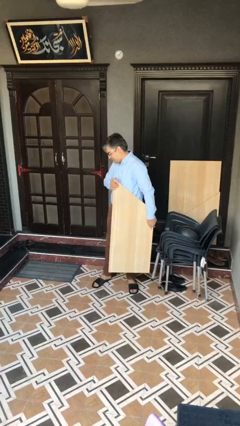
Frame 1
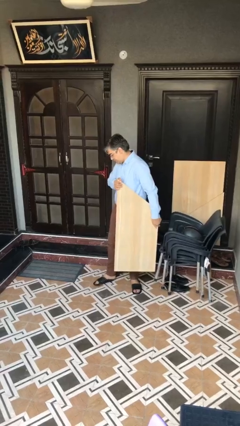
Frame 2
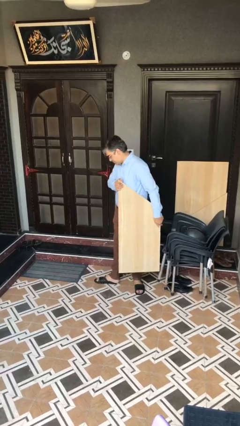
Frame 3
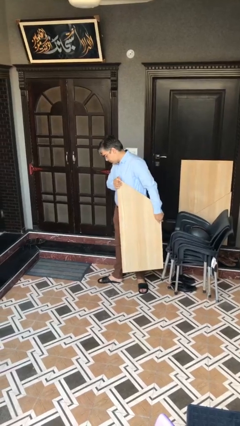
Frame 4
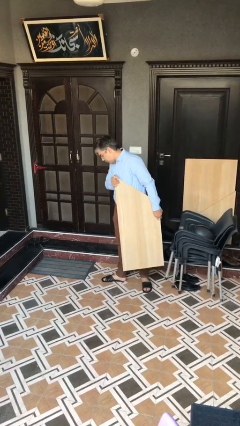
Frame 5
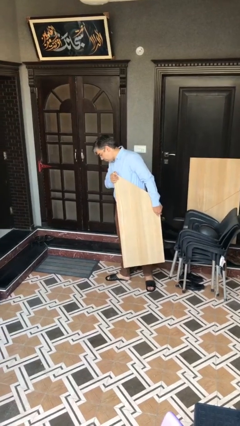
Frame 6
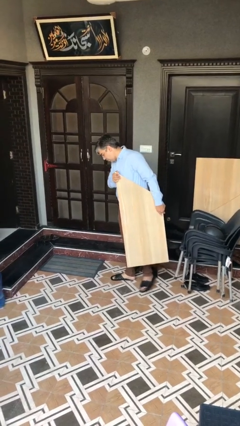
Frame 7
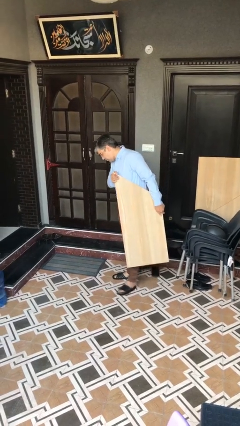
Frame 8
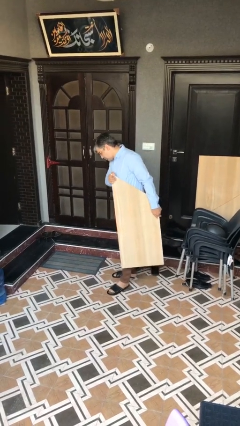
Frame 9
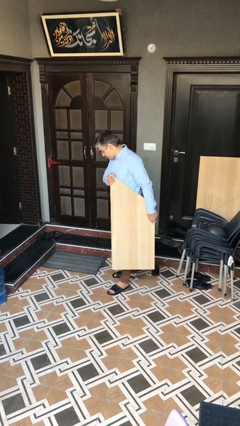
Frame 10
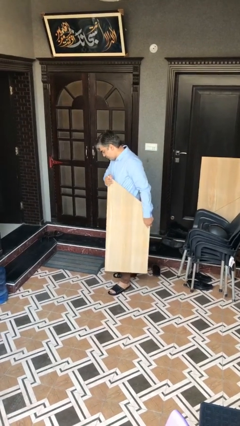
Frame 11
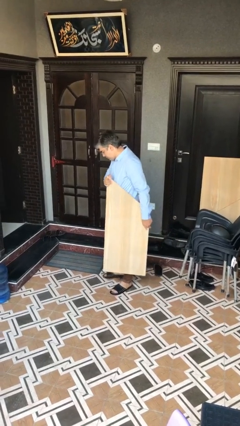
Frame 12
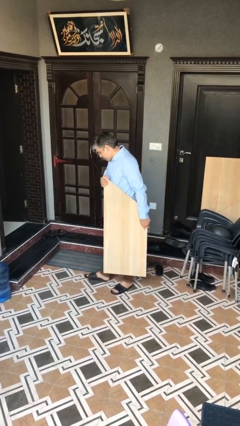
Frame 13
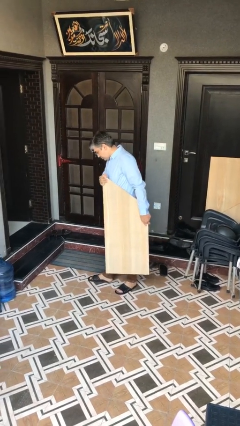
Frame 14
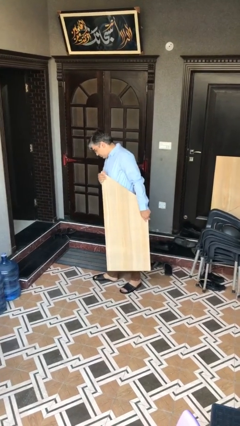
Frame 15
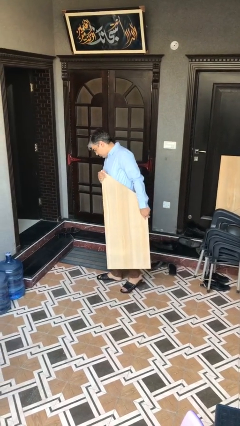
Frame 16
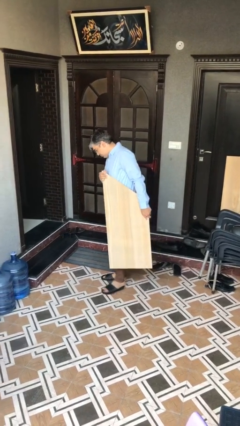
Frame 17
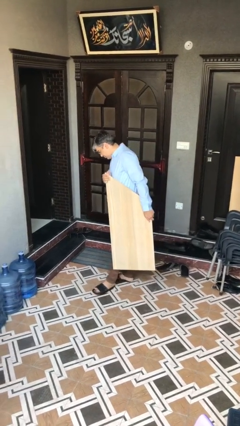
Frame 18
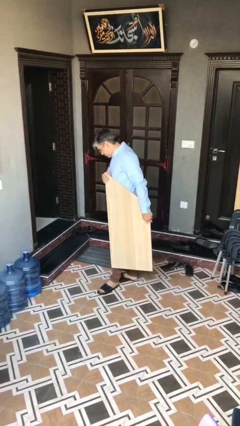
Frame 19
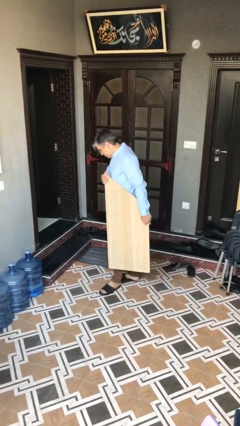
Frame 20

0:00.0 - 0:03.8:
person carries heavy object

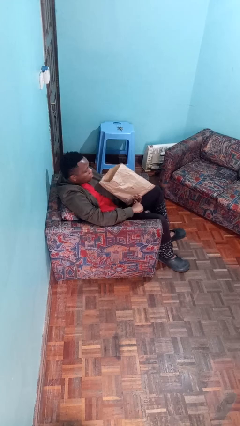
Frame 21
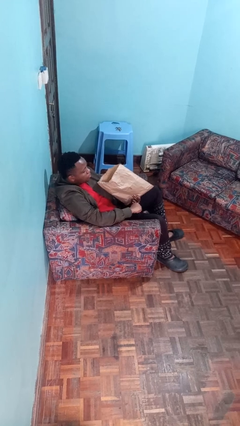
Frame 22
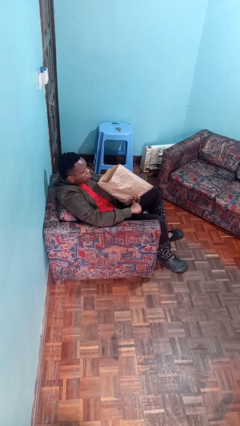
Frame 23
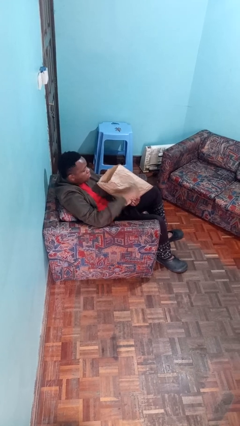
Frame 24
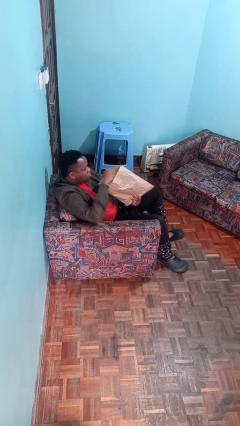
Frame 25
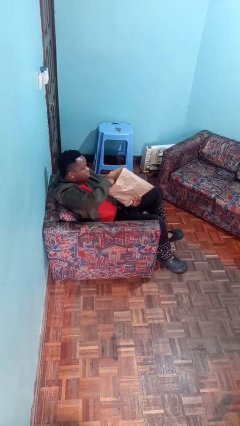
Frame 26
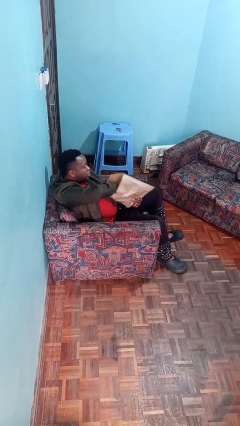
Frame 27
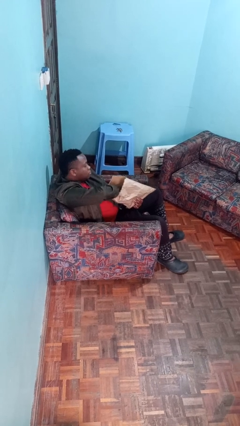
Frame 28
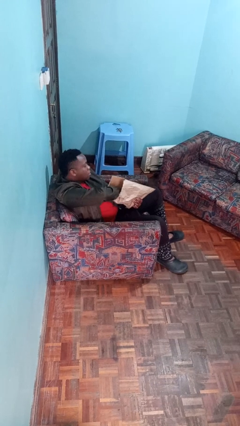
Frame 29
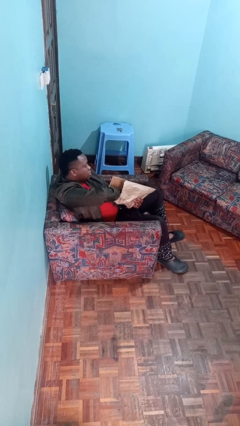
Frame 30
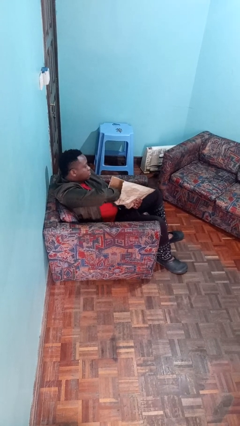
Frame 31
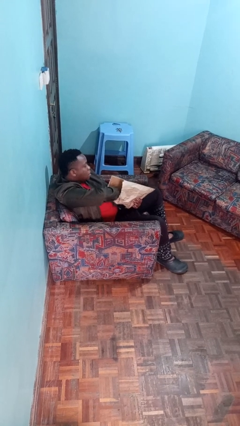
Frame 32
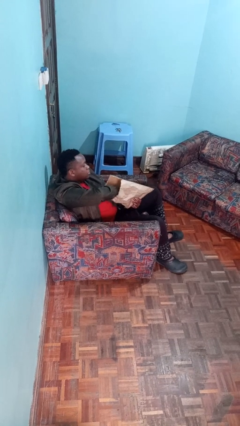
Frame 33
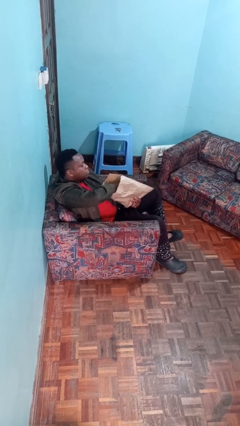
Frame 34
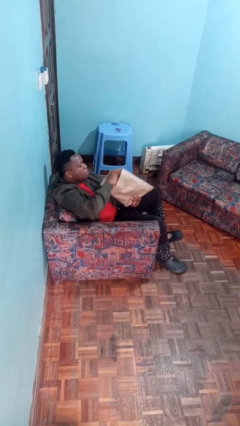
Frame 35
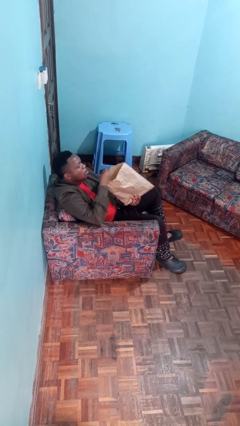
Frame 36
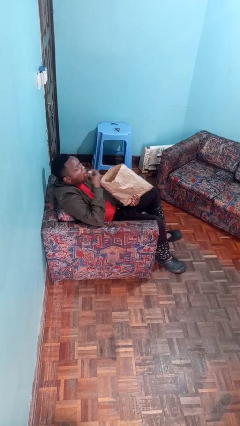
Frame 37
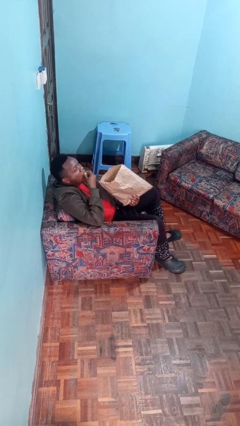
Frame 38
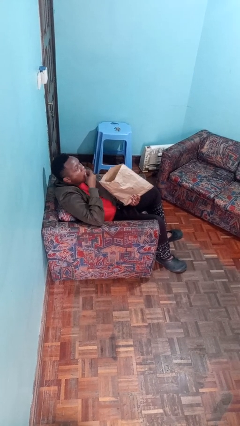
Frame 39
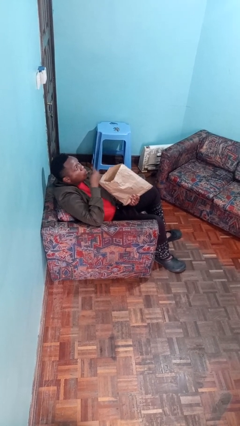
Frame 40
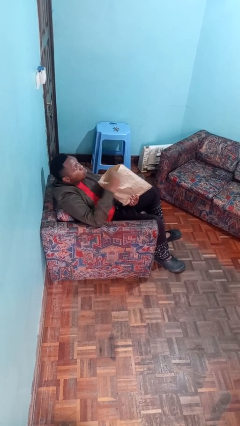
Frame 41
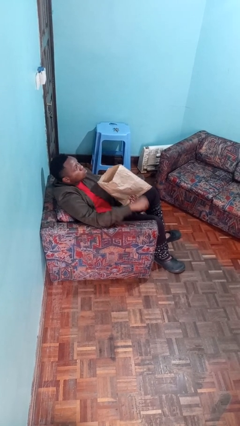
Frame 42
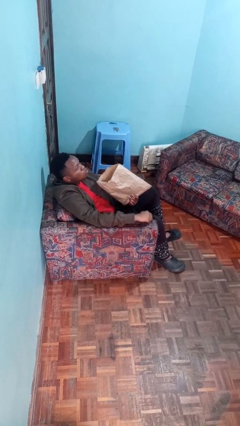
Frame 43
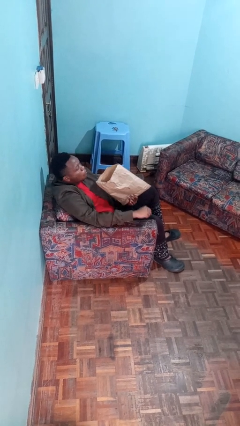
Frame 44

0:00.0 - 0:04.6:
person eats snack from bag

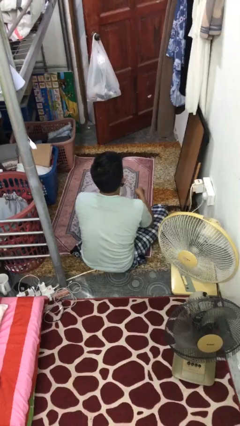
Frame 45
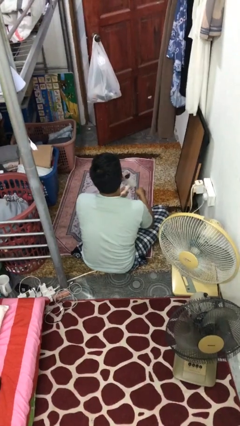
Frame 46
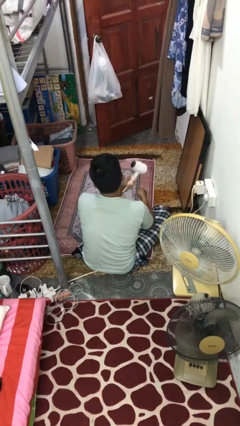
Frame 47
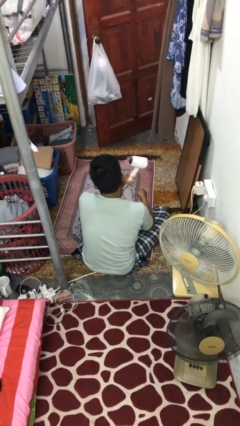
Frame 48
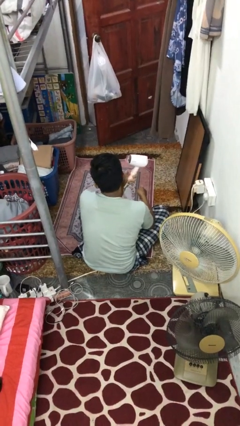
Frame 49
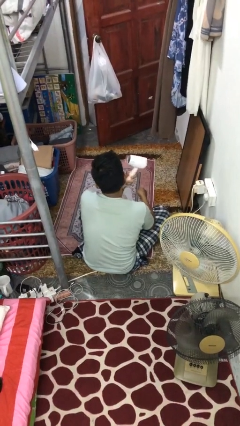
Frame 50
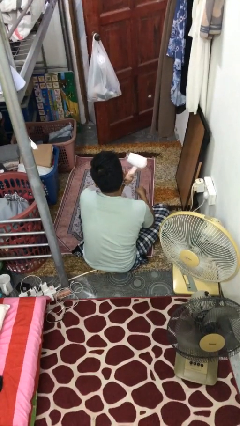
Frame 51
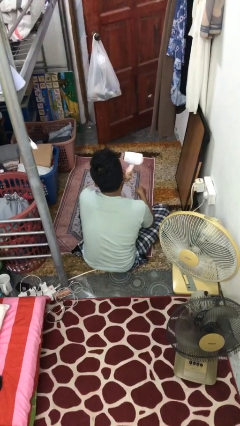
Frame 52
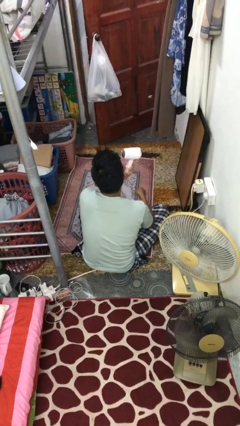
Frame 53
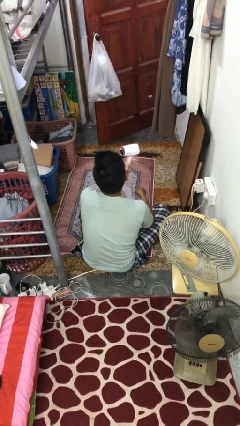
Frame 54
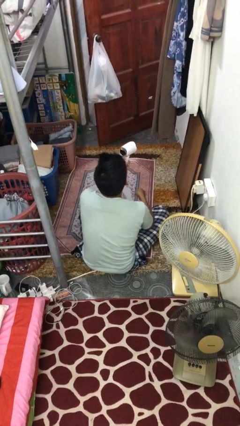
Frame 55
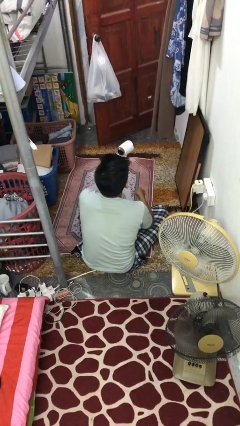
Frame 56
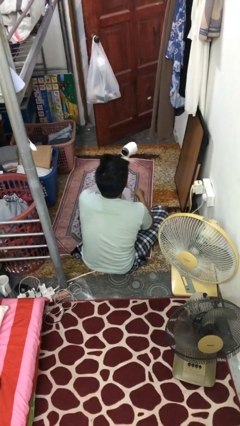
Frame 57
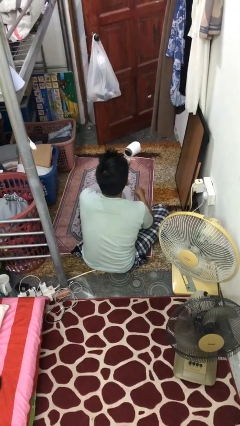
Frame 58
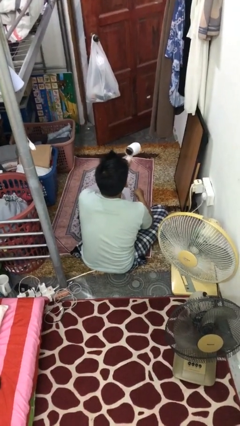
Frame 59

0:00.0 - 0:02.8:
person dries hair with hairdryer

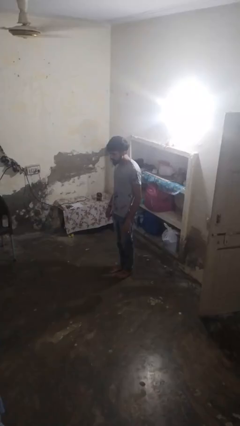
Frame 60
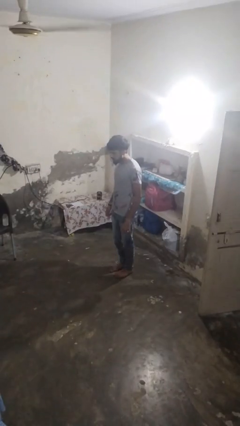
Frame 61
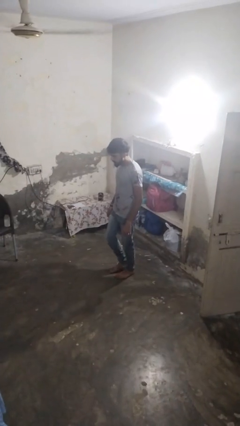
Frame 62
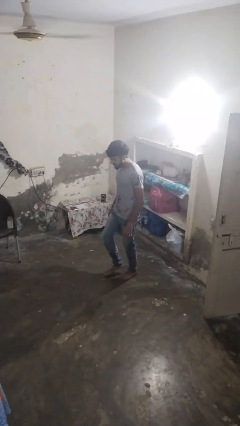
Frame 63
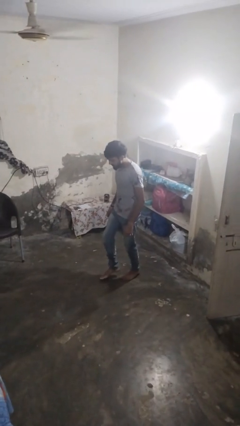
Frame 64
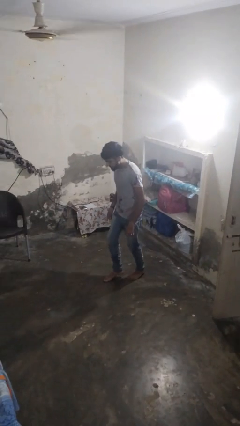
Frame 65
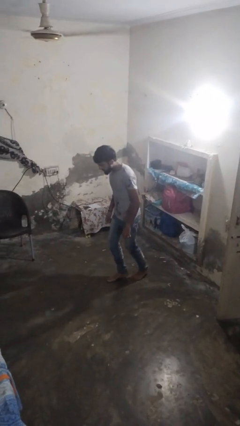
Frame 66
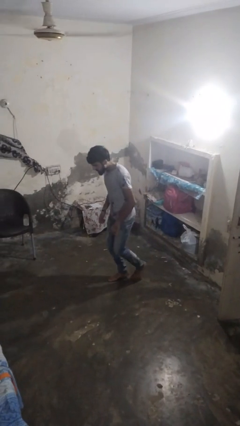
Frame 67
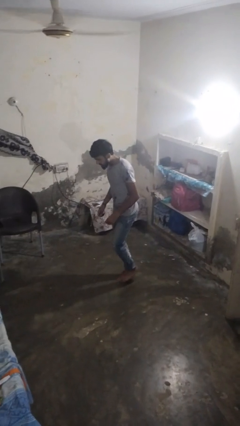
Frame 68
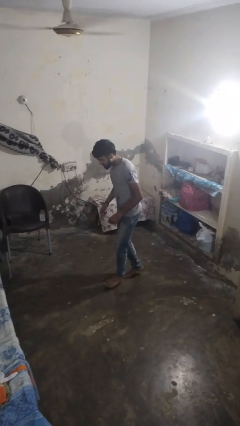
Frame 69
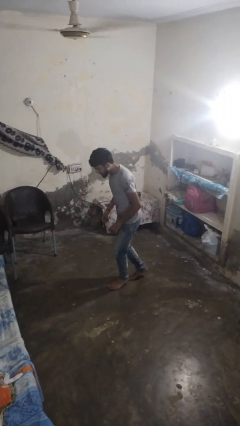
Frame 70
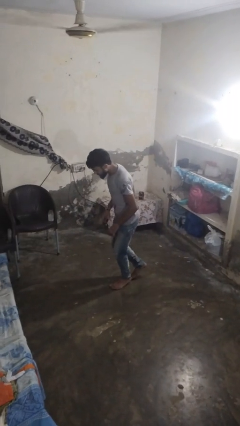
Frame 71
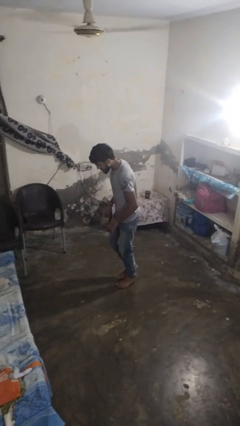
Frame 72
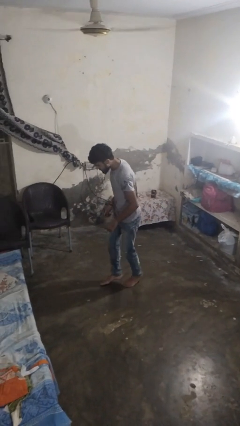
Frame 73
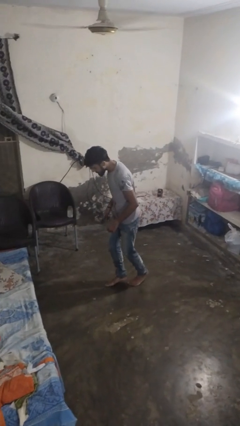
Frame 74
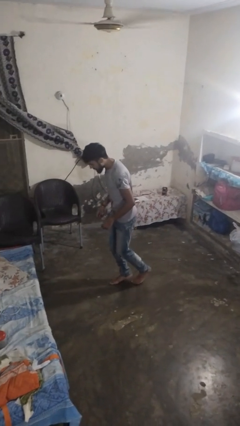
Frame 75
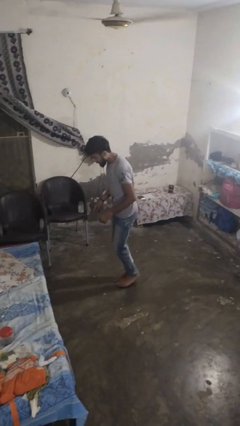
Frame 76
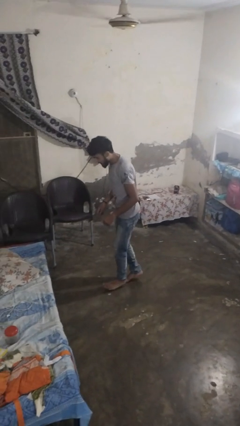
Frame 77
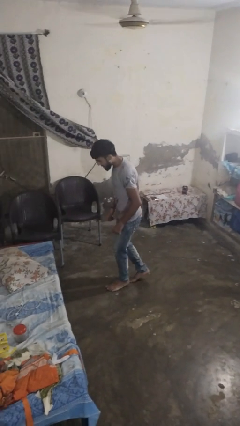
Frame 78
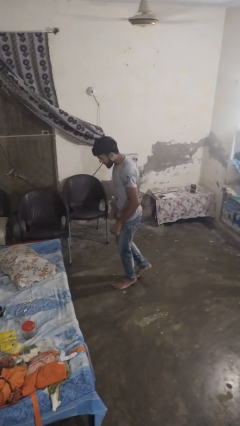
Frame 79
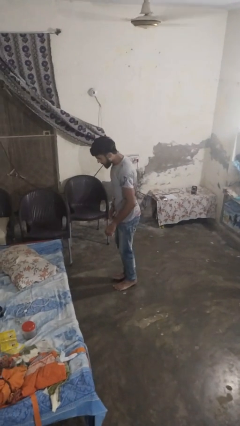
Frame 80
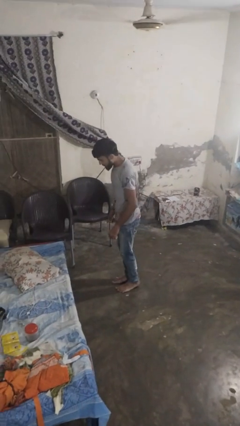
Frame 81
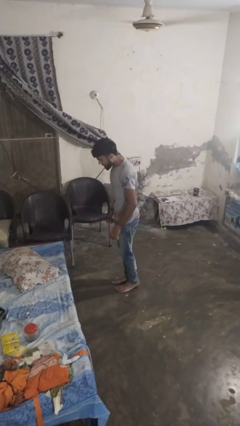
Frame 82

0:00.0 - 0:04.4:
person walks tiptoe

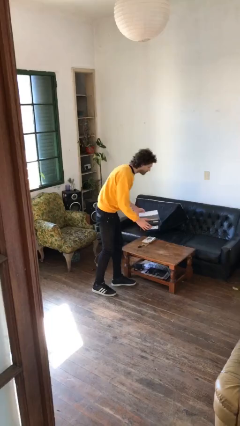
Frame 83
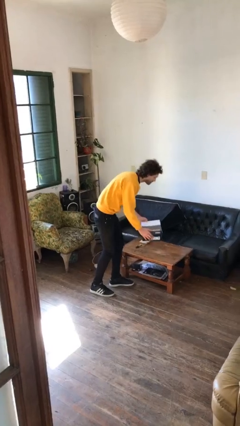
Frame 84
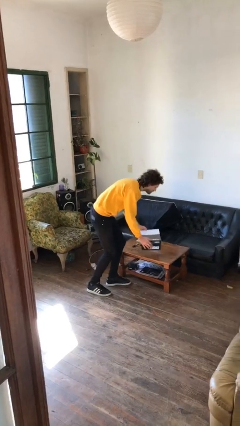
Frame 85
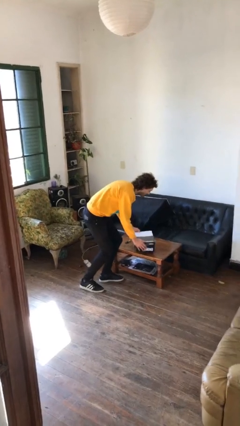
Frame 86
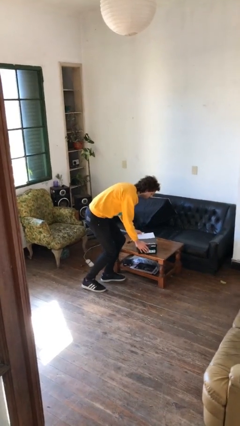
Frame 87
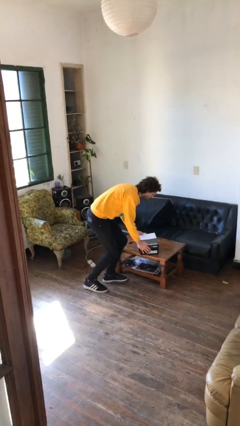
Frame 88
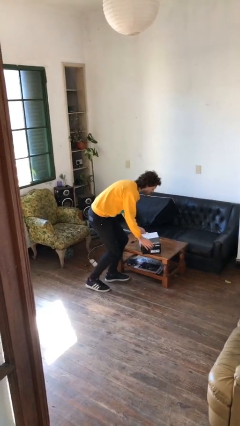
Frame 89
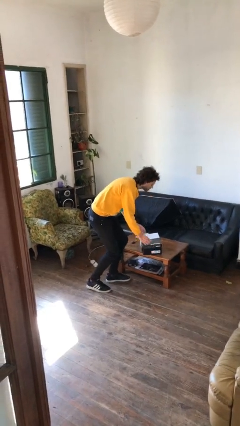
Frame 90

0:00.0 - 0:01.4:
person puts down object on table

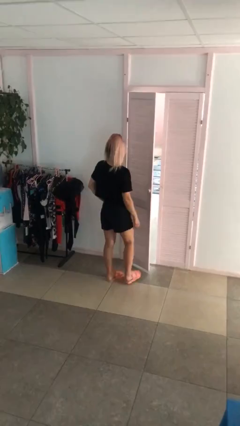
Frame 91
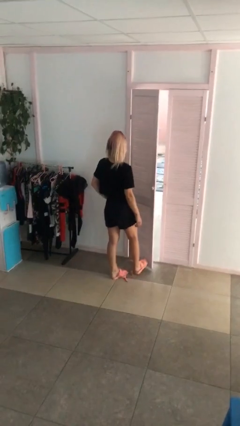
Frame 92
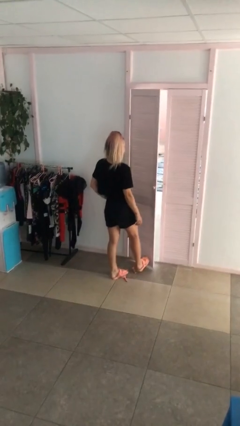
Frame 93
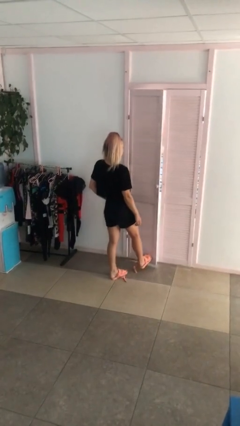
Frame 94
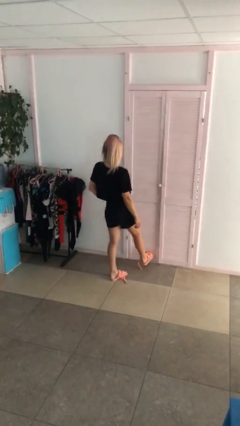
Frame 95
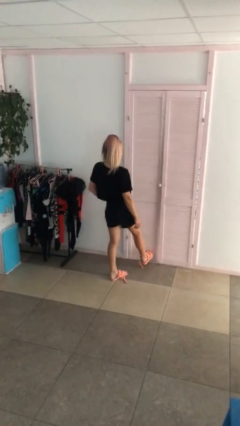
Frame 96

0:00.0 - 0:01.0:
person closes door with foot
